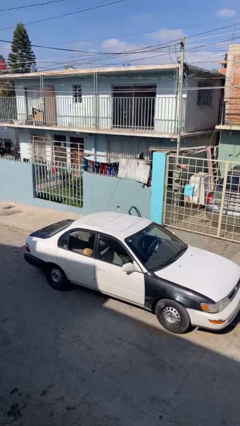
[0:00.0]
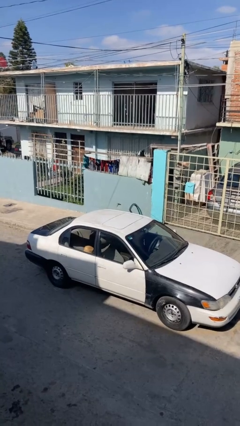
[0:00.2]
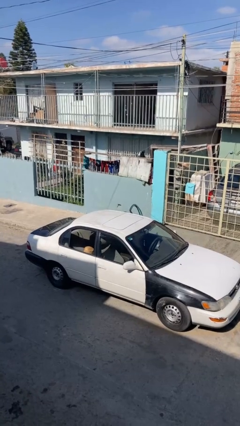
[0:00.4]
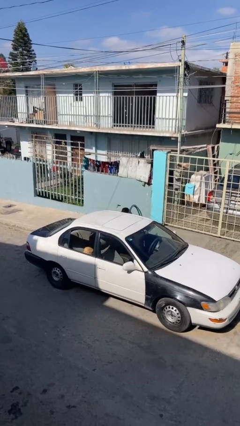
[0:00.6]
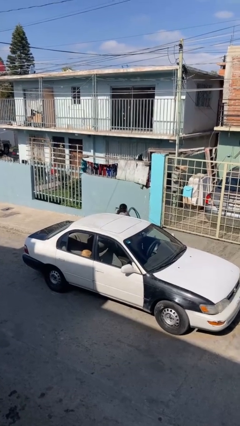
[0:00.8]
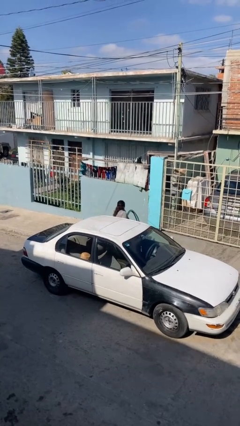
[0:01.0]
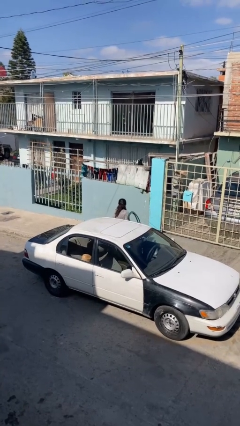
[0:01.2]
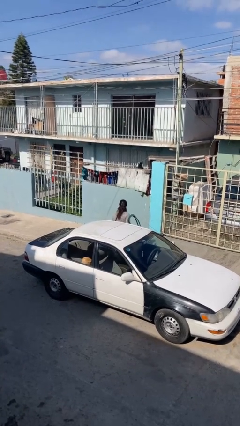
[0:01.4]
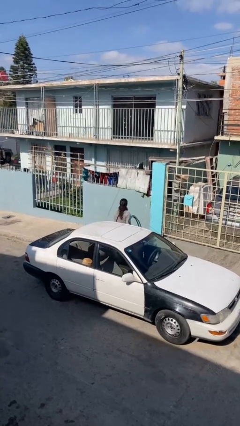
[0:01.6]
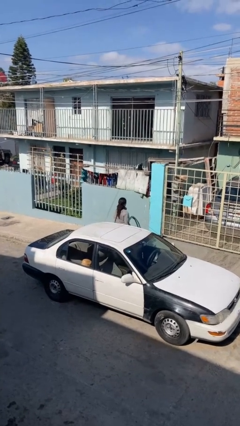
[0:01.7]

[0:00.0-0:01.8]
person exits car

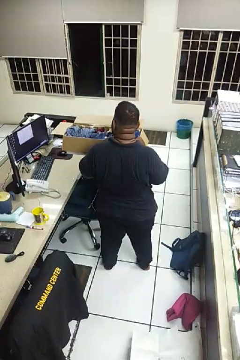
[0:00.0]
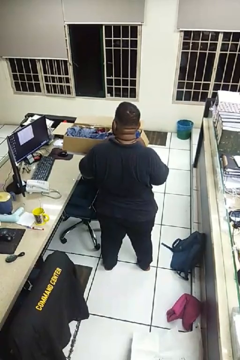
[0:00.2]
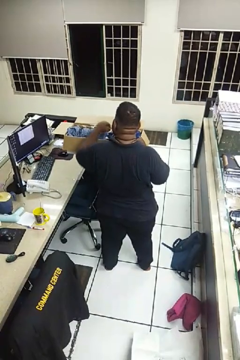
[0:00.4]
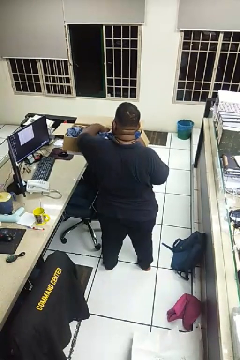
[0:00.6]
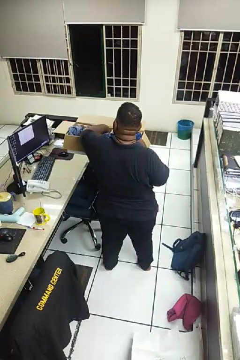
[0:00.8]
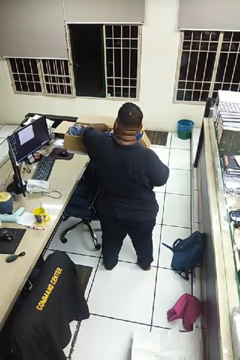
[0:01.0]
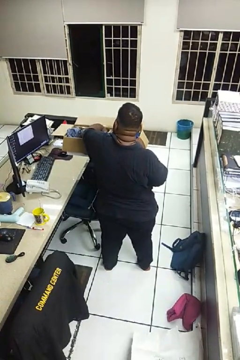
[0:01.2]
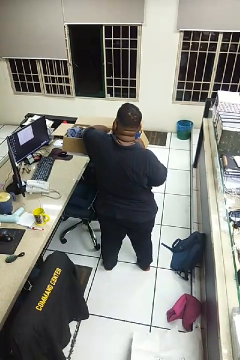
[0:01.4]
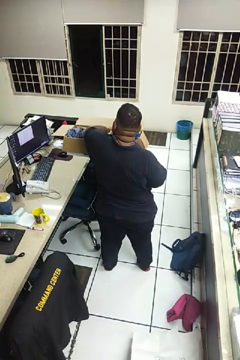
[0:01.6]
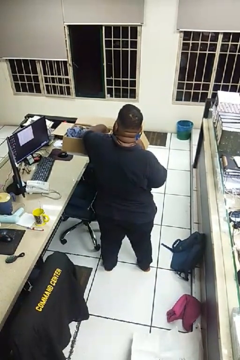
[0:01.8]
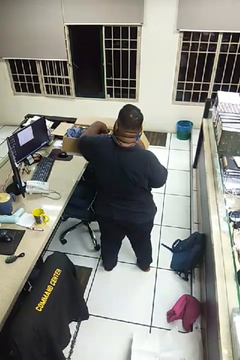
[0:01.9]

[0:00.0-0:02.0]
person searches in box

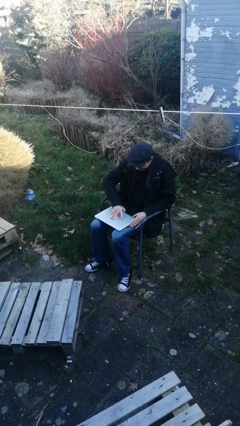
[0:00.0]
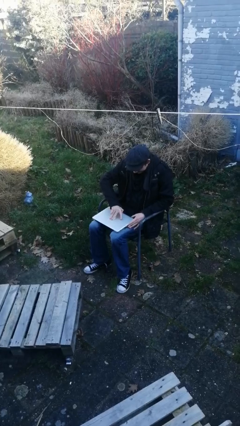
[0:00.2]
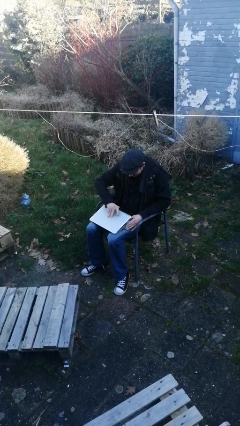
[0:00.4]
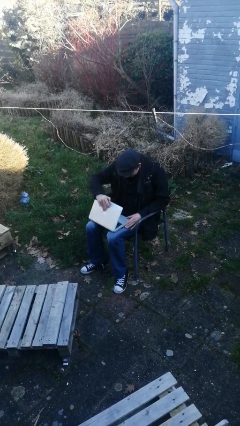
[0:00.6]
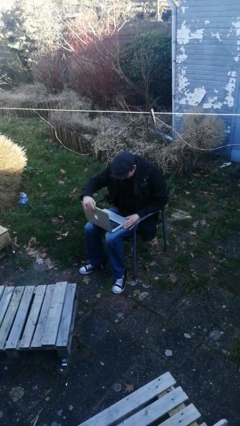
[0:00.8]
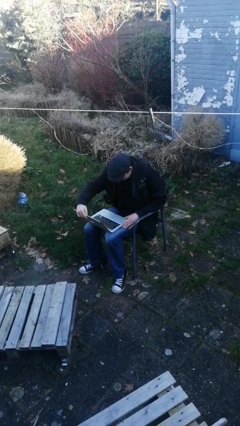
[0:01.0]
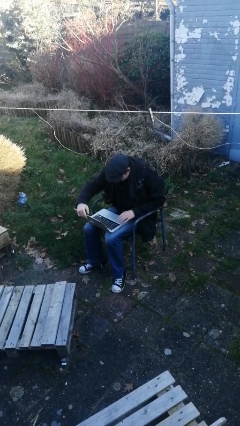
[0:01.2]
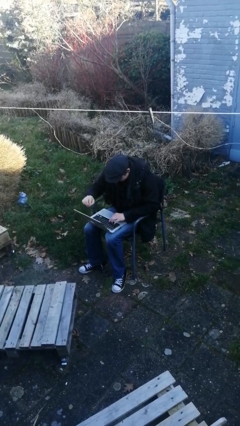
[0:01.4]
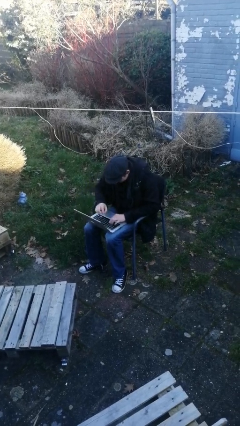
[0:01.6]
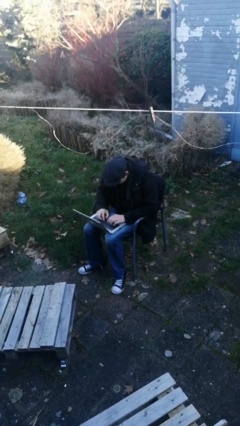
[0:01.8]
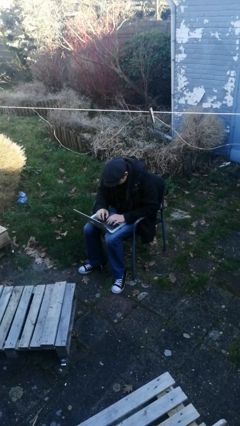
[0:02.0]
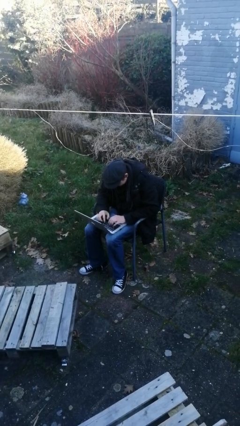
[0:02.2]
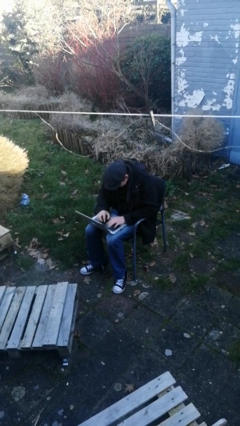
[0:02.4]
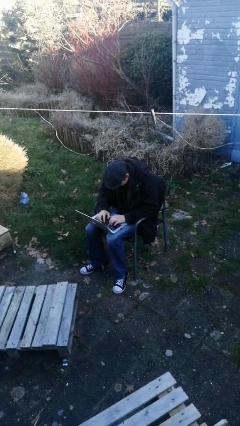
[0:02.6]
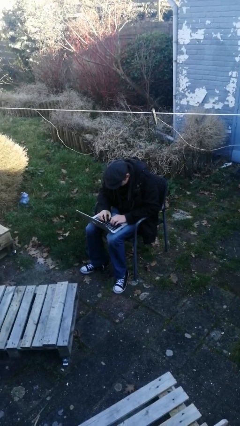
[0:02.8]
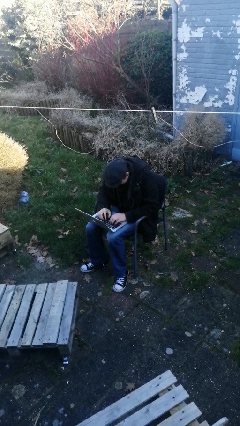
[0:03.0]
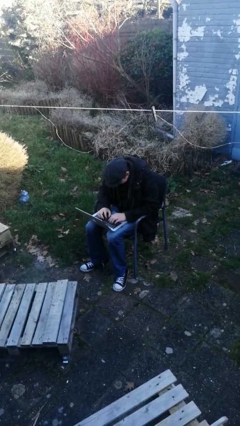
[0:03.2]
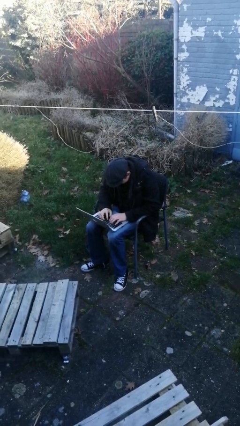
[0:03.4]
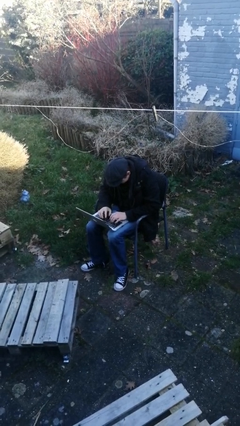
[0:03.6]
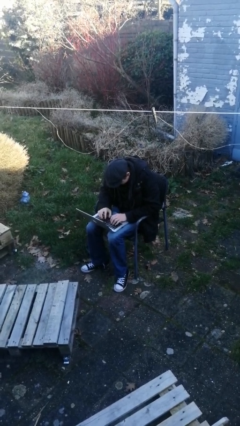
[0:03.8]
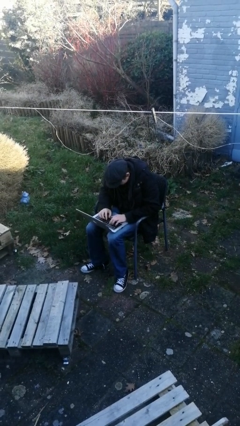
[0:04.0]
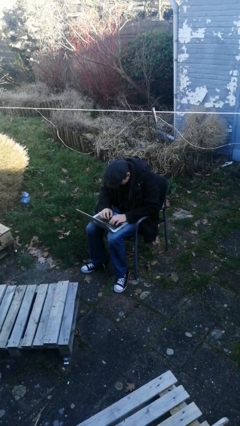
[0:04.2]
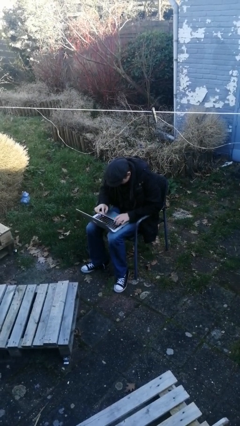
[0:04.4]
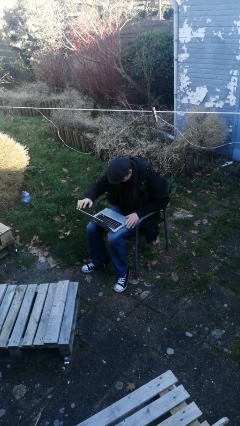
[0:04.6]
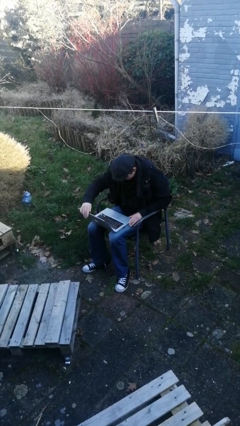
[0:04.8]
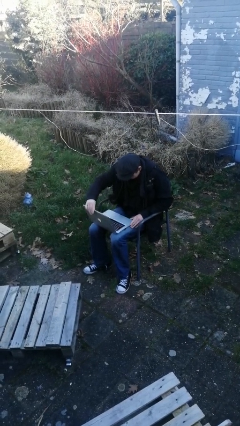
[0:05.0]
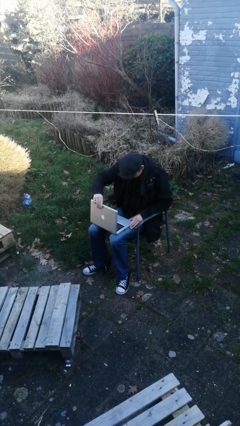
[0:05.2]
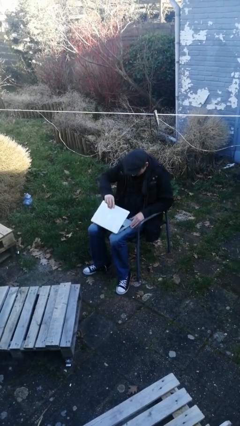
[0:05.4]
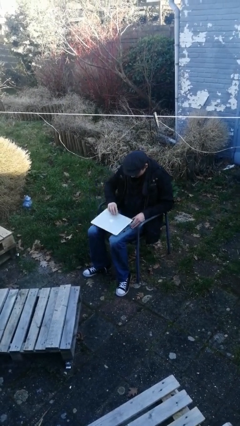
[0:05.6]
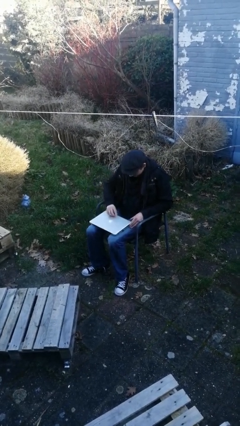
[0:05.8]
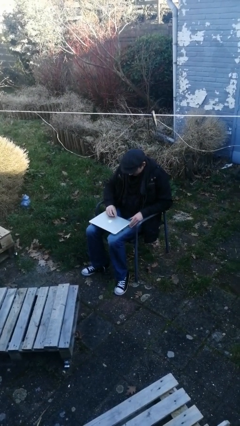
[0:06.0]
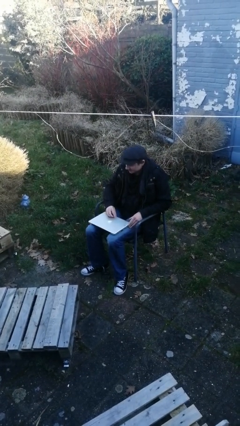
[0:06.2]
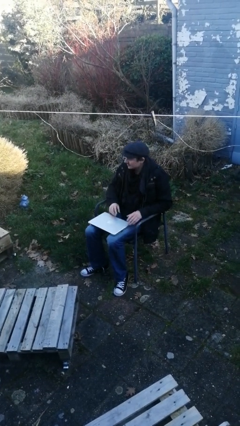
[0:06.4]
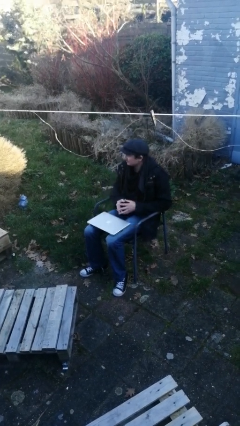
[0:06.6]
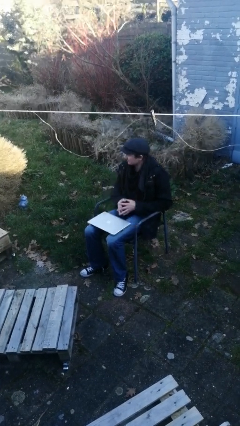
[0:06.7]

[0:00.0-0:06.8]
person interacts with laptop

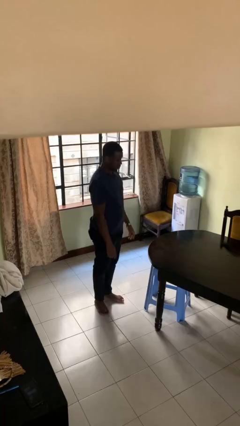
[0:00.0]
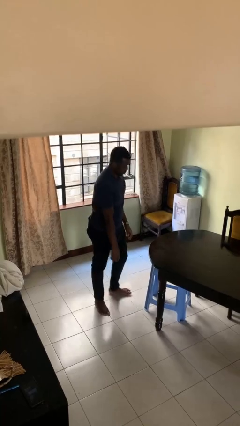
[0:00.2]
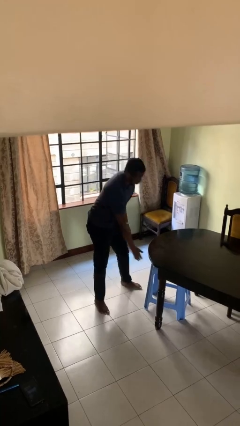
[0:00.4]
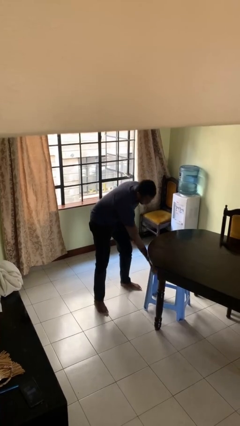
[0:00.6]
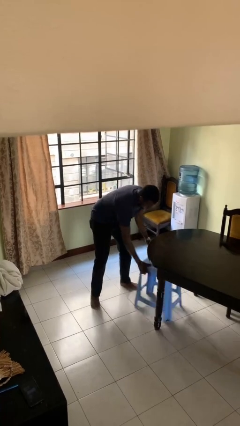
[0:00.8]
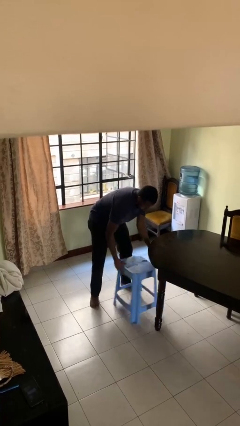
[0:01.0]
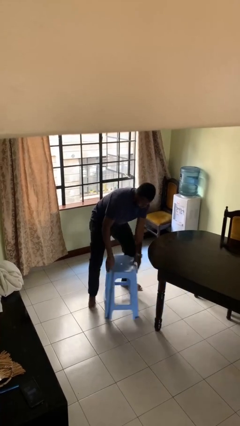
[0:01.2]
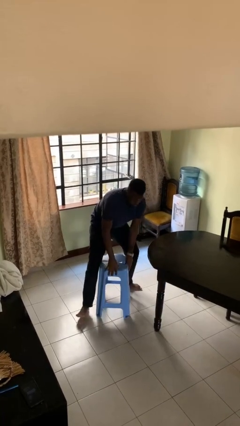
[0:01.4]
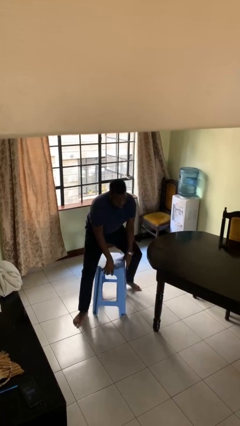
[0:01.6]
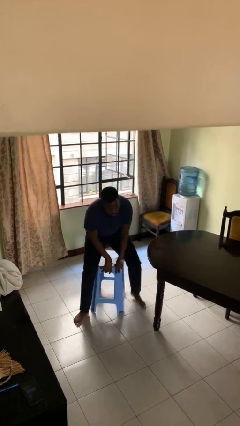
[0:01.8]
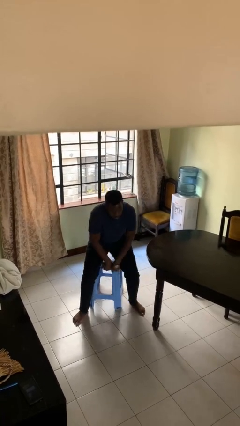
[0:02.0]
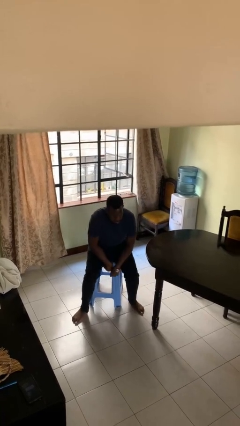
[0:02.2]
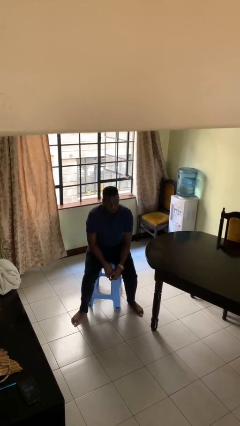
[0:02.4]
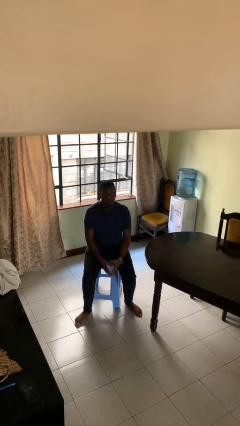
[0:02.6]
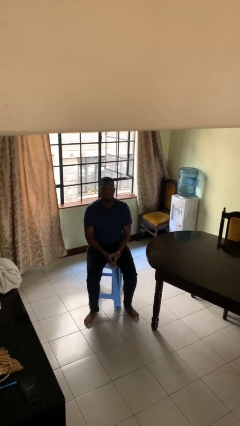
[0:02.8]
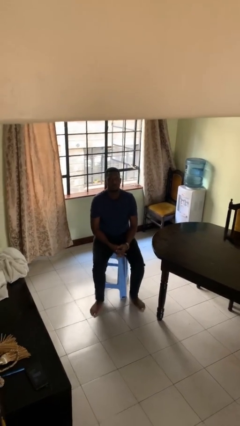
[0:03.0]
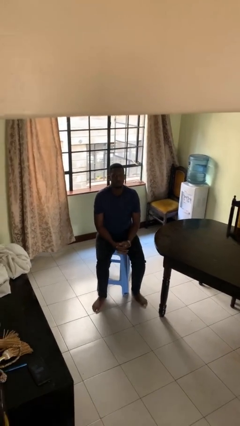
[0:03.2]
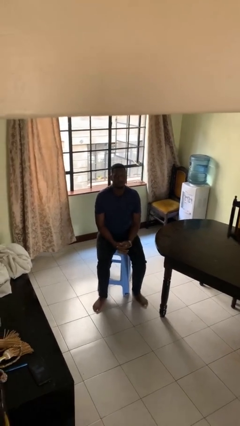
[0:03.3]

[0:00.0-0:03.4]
person sits down

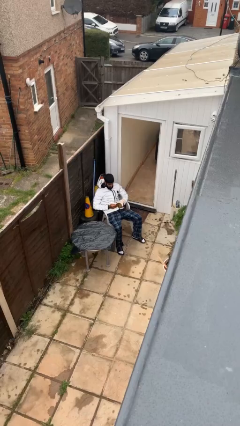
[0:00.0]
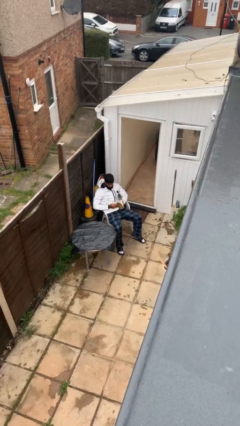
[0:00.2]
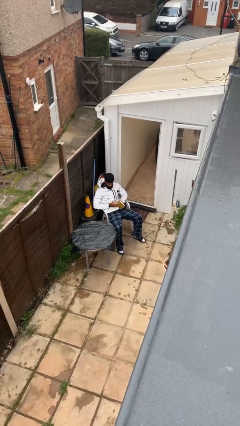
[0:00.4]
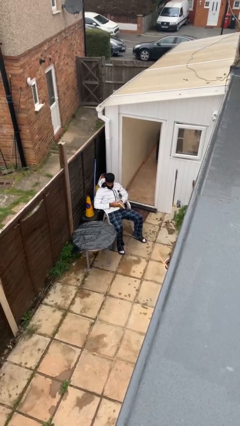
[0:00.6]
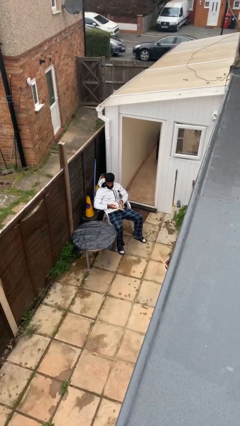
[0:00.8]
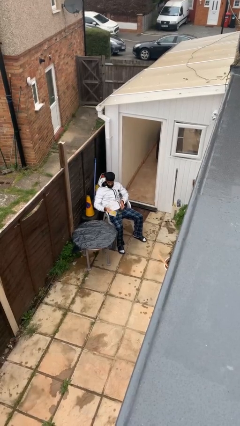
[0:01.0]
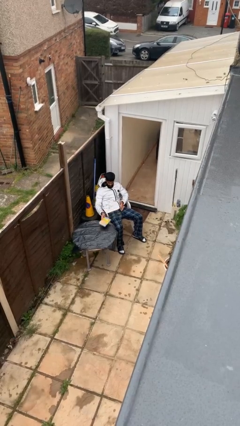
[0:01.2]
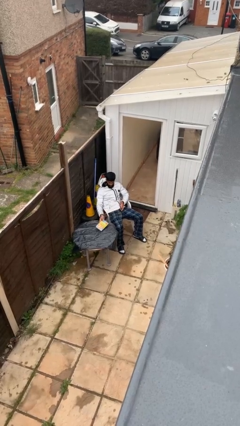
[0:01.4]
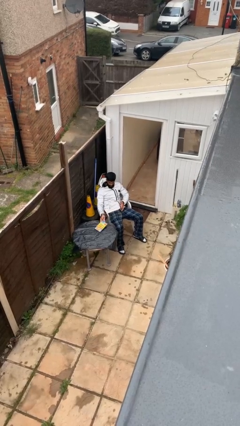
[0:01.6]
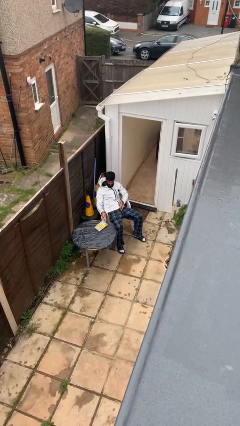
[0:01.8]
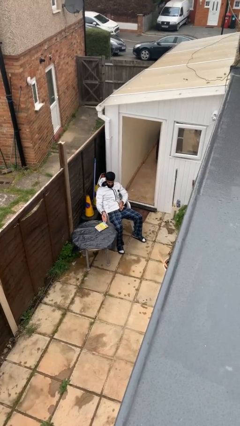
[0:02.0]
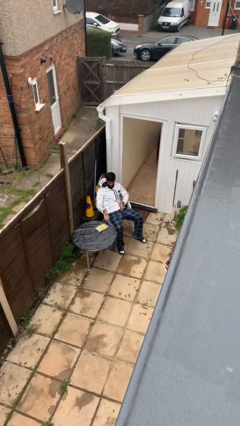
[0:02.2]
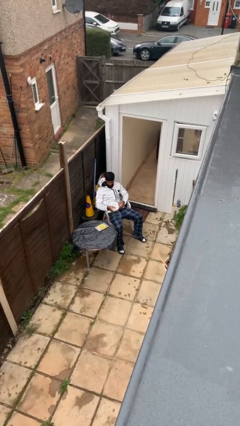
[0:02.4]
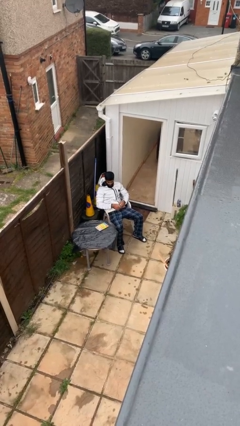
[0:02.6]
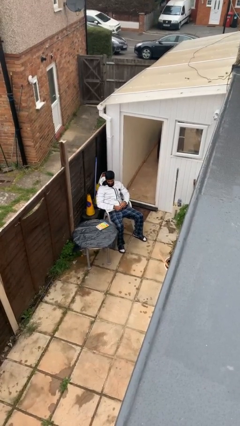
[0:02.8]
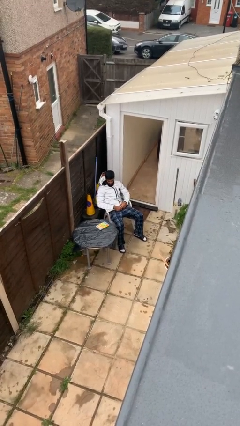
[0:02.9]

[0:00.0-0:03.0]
person puts down object on table

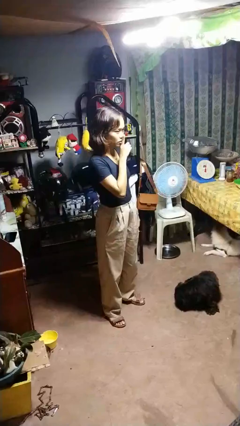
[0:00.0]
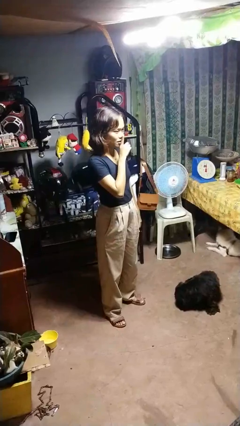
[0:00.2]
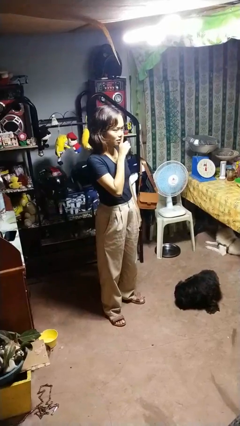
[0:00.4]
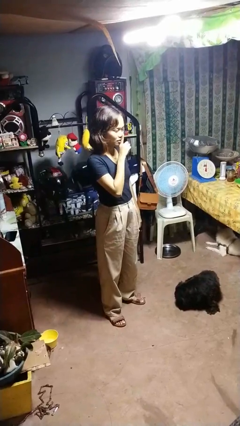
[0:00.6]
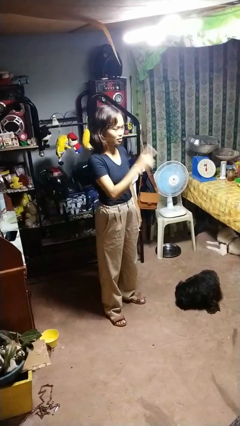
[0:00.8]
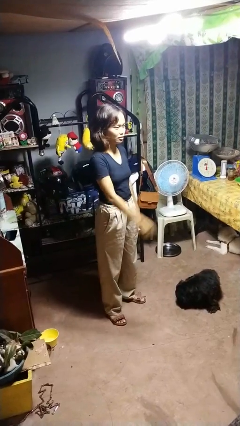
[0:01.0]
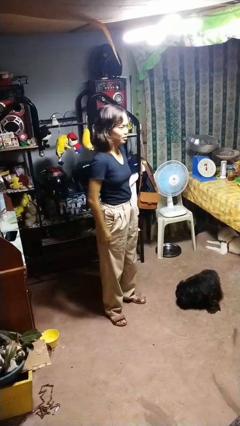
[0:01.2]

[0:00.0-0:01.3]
person gestures be quiet
